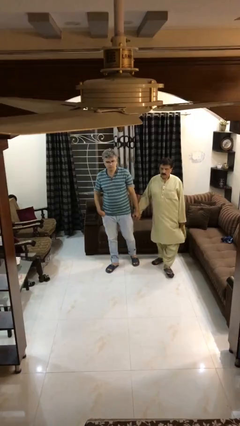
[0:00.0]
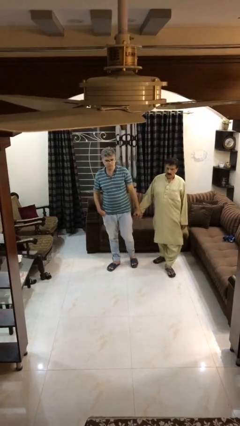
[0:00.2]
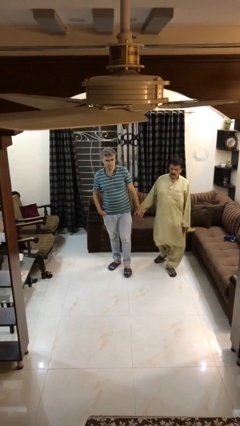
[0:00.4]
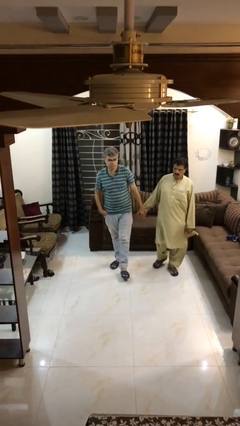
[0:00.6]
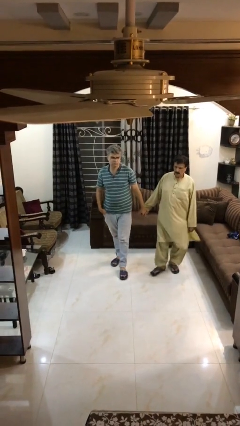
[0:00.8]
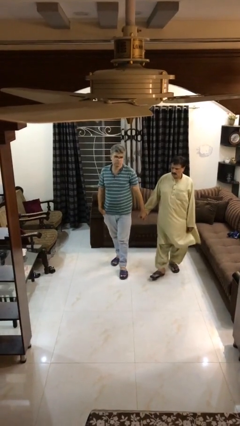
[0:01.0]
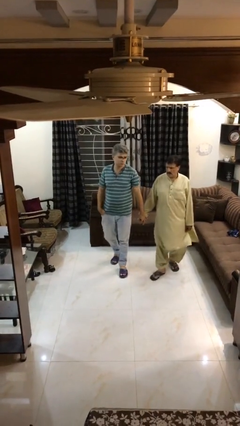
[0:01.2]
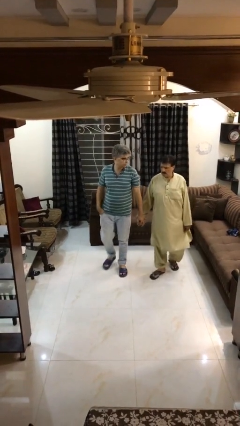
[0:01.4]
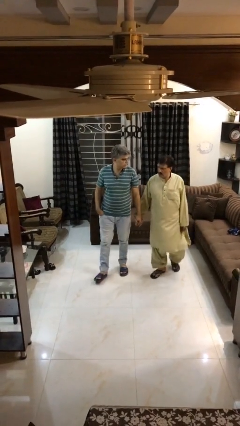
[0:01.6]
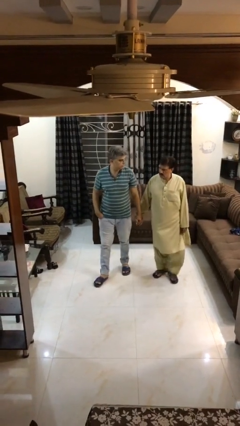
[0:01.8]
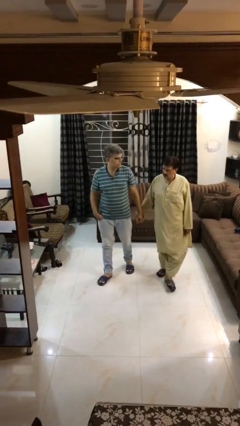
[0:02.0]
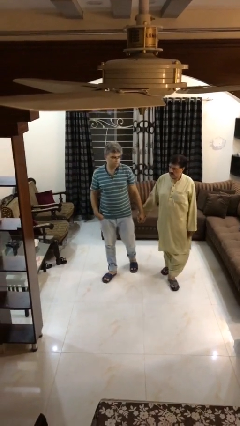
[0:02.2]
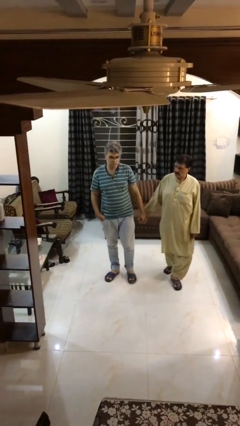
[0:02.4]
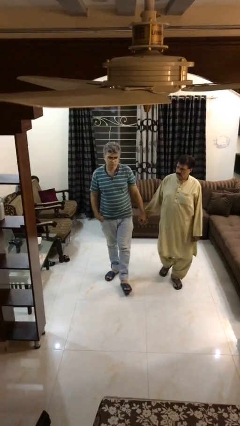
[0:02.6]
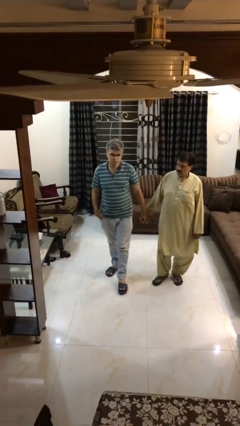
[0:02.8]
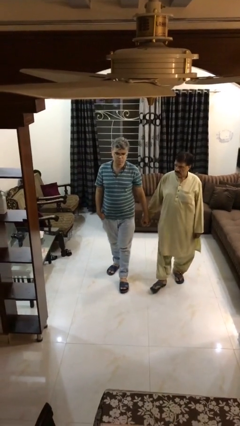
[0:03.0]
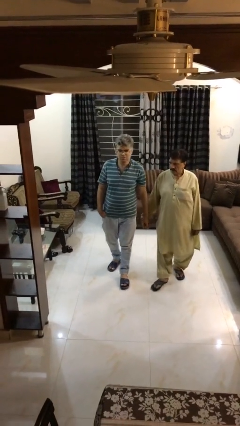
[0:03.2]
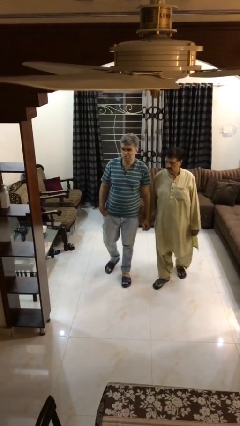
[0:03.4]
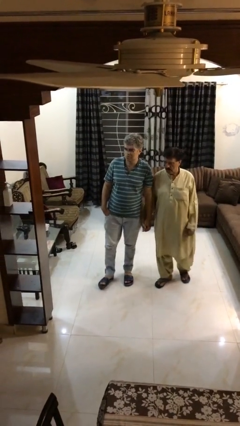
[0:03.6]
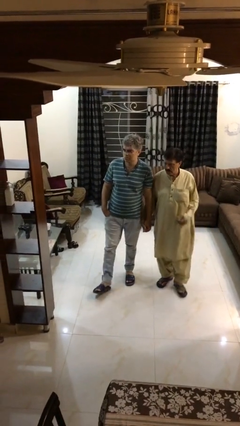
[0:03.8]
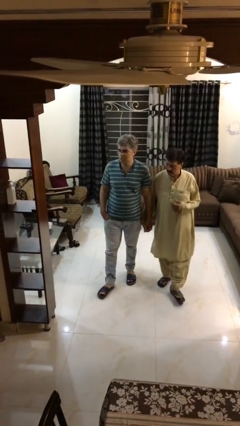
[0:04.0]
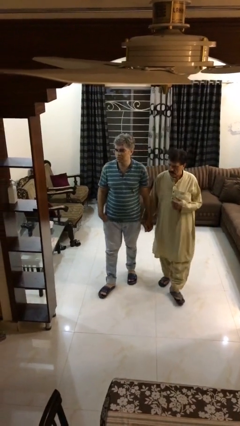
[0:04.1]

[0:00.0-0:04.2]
person holds hand

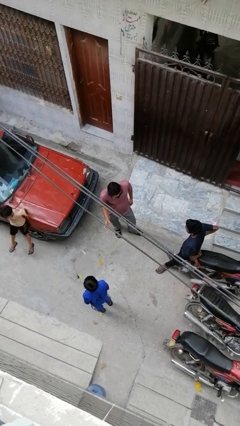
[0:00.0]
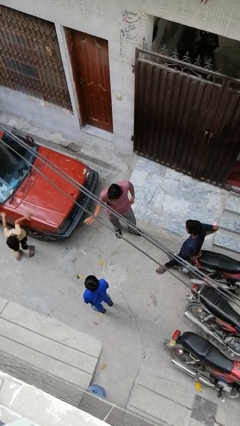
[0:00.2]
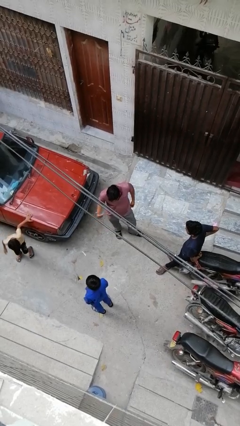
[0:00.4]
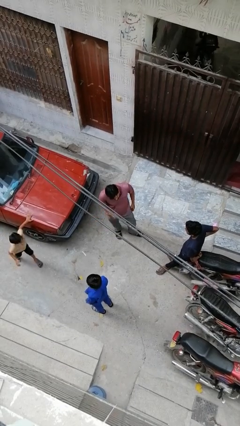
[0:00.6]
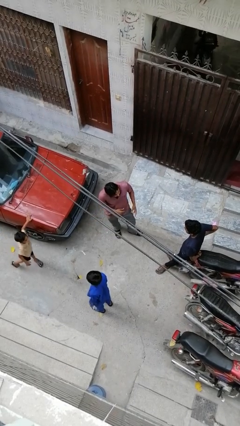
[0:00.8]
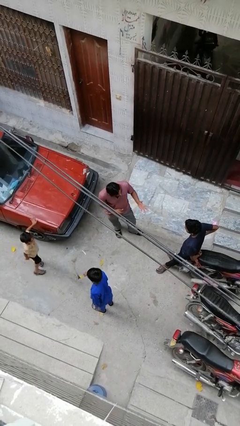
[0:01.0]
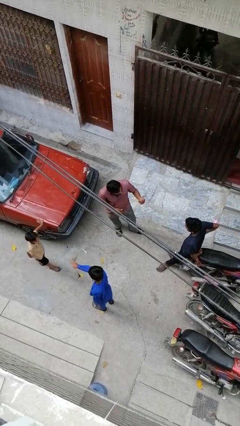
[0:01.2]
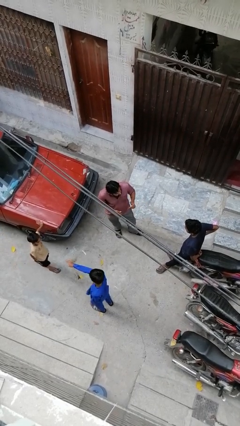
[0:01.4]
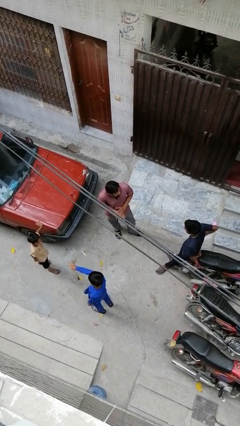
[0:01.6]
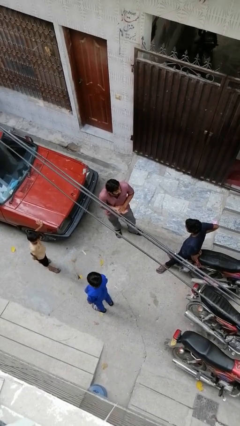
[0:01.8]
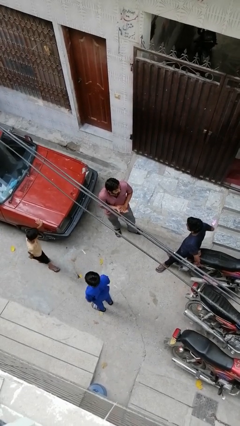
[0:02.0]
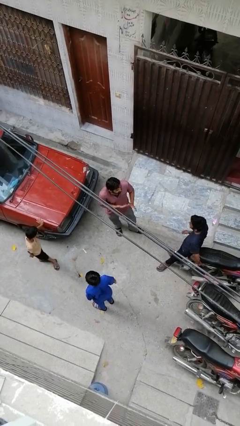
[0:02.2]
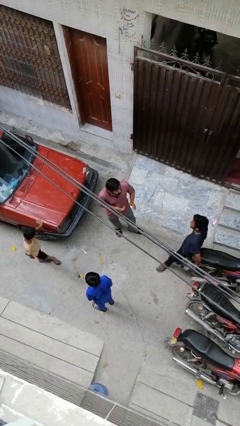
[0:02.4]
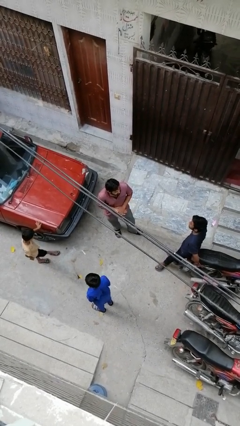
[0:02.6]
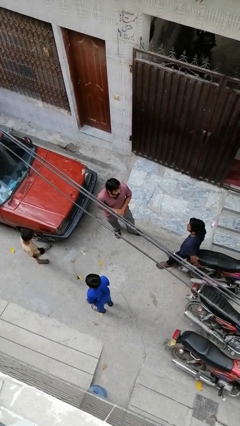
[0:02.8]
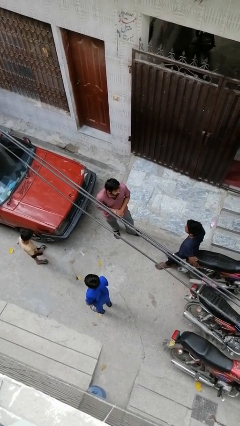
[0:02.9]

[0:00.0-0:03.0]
person talks to person

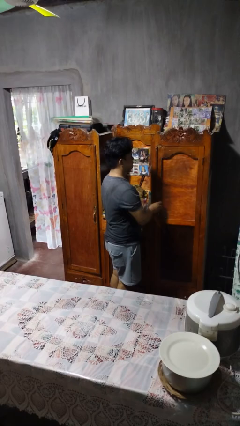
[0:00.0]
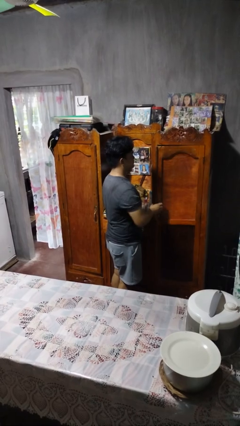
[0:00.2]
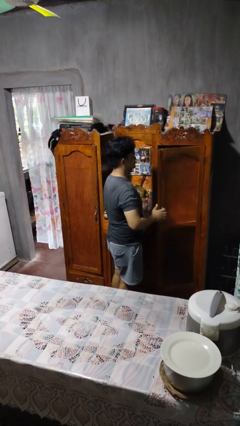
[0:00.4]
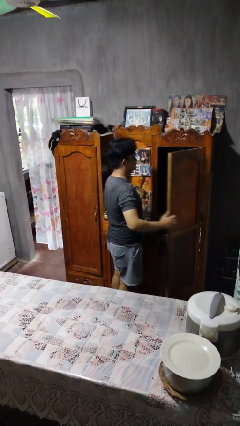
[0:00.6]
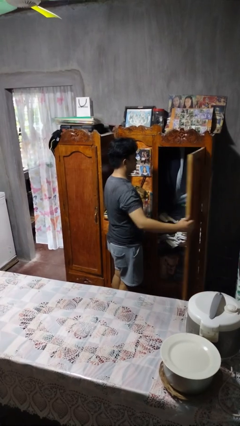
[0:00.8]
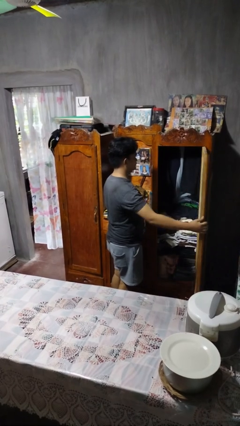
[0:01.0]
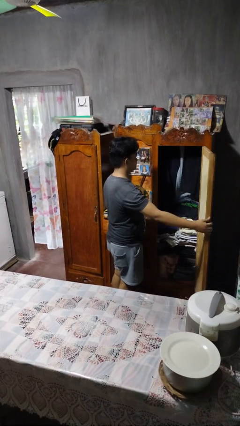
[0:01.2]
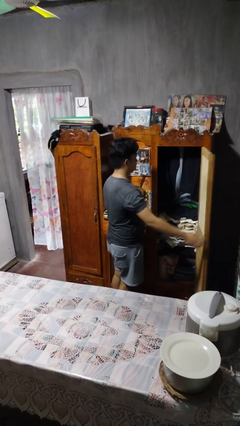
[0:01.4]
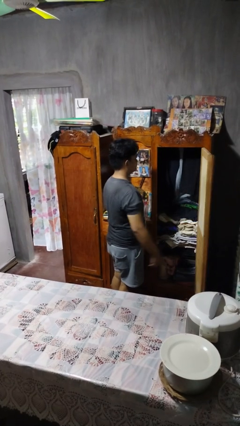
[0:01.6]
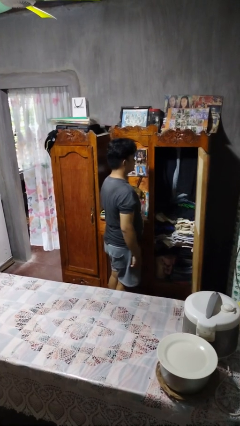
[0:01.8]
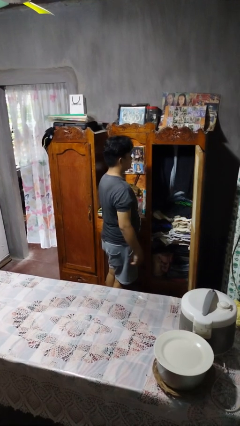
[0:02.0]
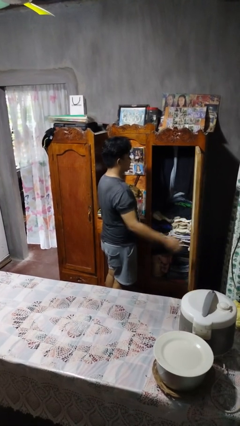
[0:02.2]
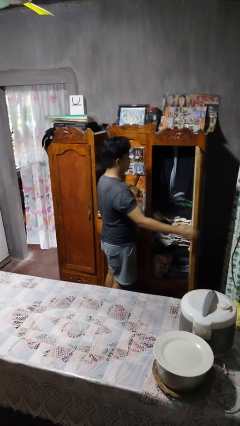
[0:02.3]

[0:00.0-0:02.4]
person opens closet door

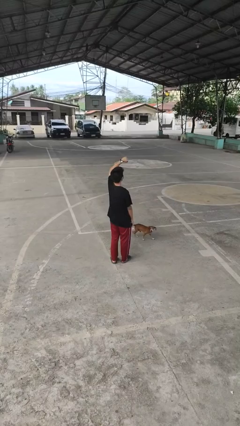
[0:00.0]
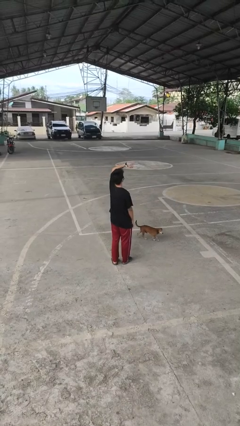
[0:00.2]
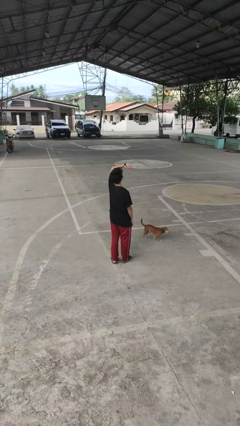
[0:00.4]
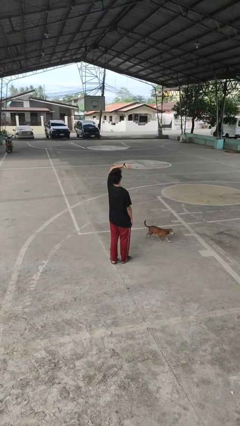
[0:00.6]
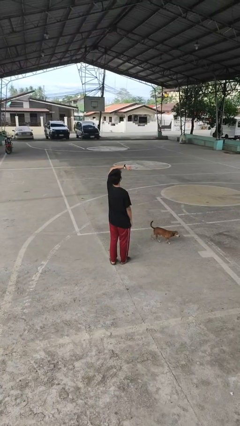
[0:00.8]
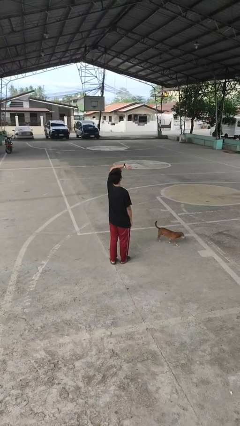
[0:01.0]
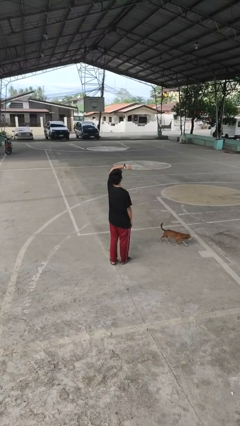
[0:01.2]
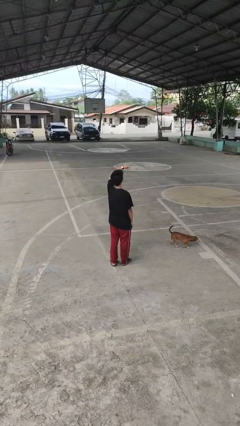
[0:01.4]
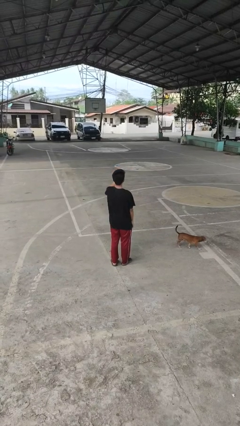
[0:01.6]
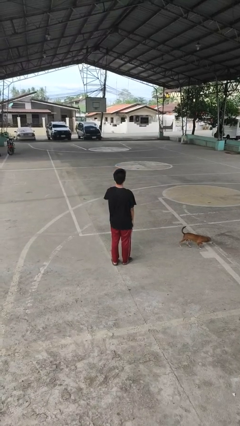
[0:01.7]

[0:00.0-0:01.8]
person looks at wristwatch

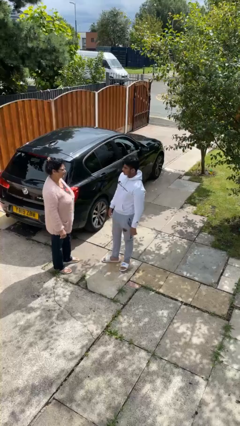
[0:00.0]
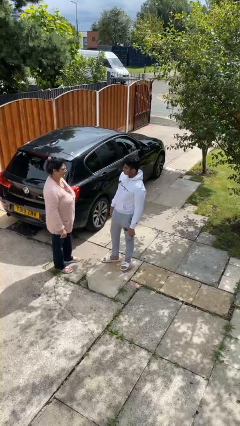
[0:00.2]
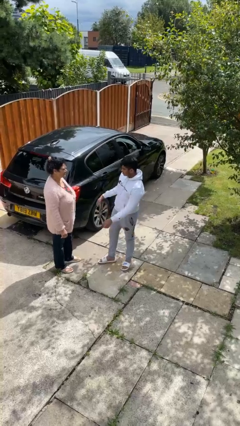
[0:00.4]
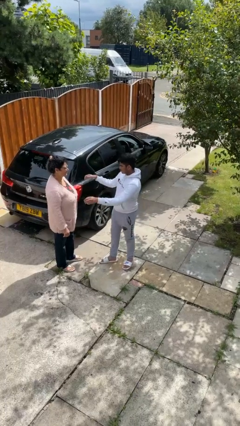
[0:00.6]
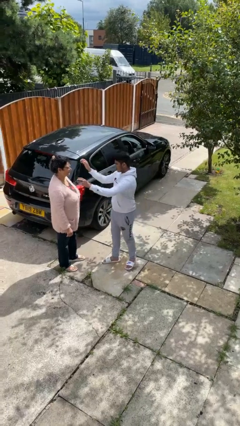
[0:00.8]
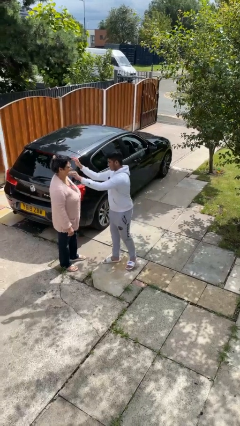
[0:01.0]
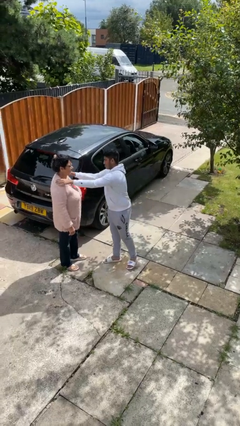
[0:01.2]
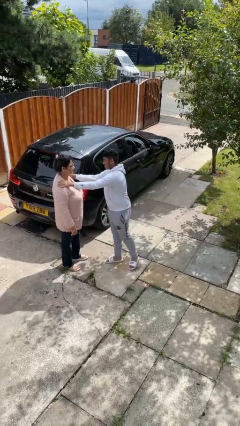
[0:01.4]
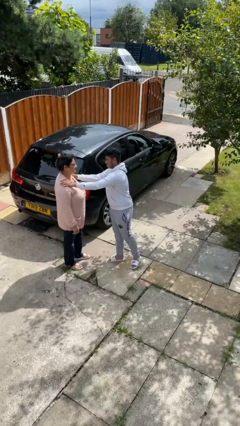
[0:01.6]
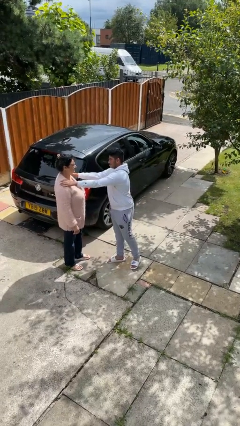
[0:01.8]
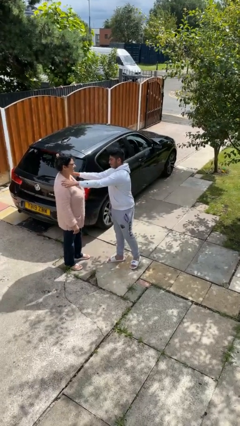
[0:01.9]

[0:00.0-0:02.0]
person pounds shoulders of person

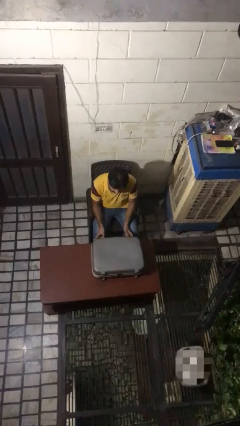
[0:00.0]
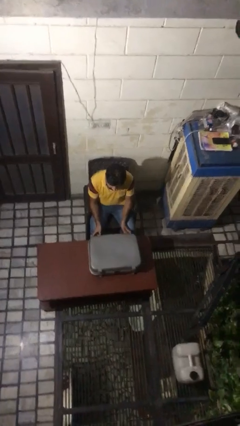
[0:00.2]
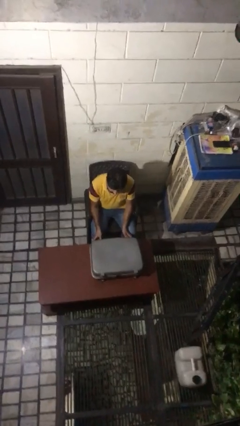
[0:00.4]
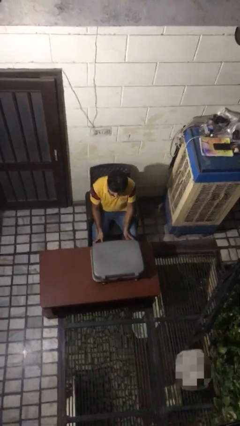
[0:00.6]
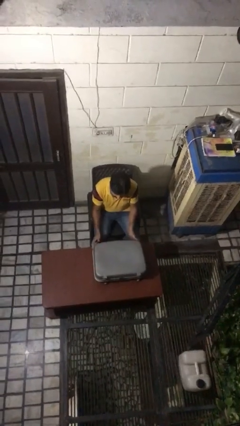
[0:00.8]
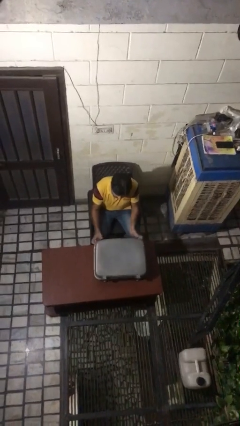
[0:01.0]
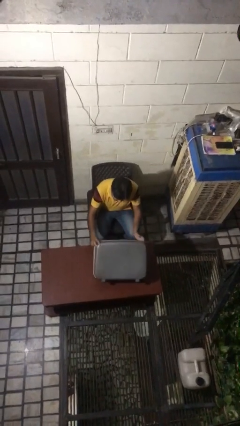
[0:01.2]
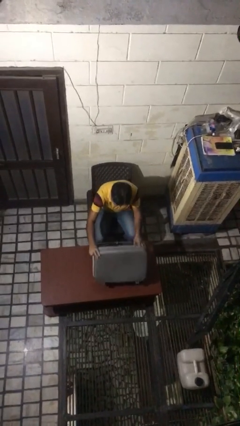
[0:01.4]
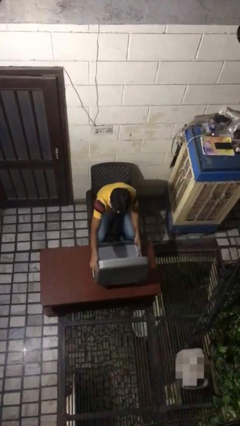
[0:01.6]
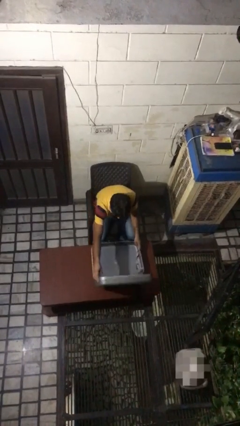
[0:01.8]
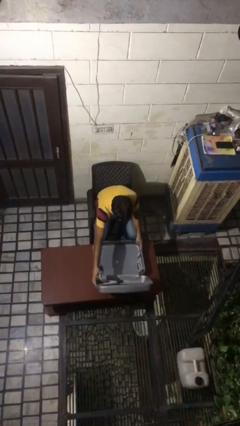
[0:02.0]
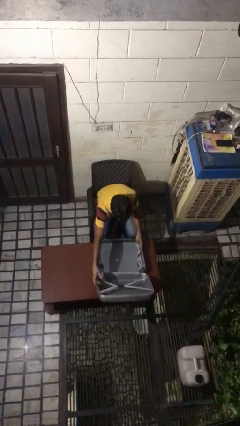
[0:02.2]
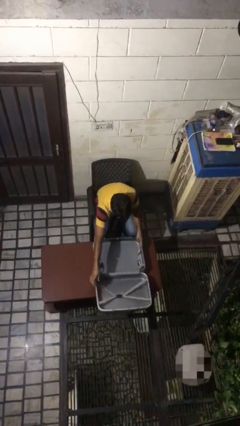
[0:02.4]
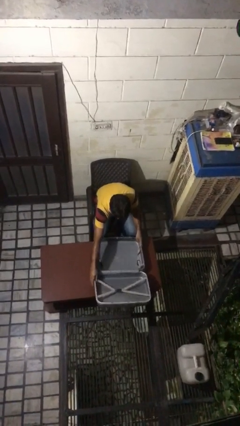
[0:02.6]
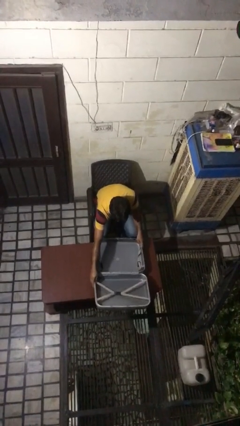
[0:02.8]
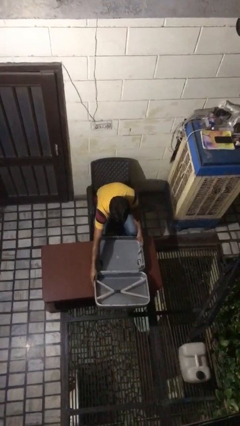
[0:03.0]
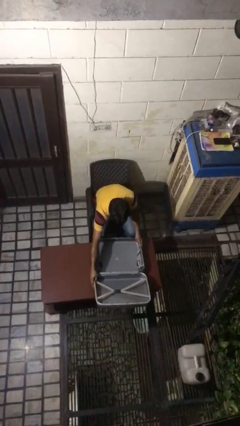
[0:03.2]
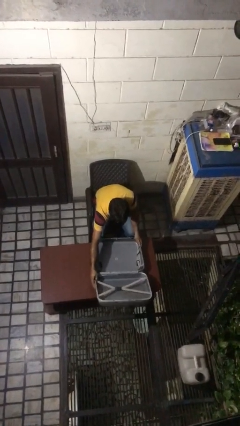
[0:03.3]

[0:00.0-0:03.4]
person opens suitcase

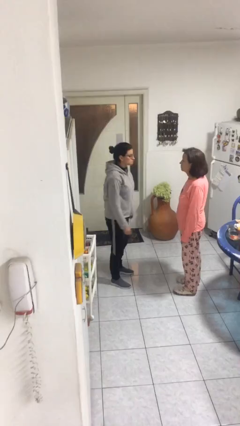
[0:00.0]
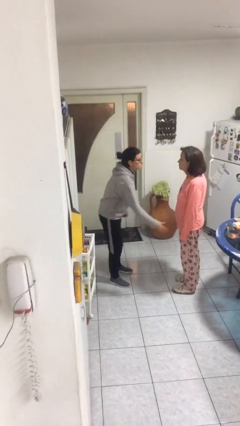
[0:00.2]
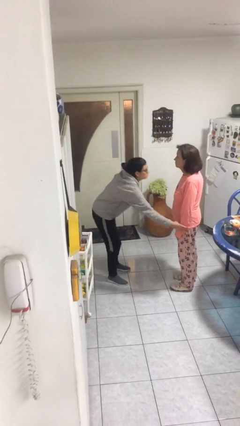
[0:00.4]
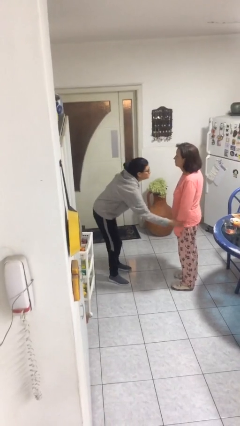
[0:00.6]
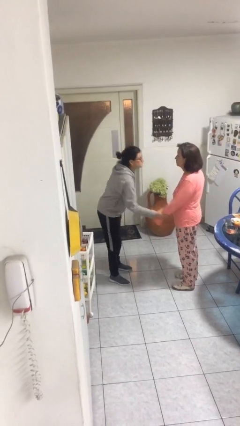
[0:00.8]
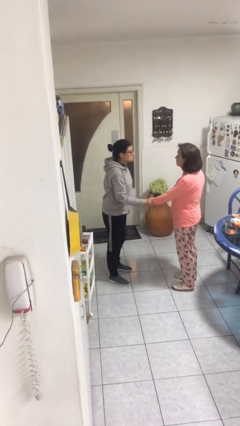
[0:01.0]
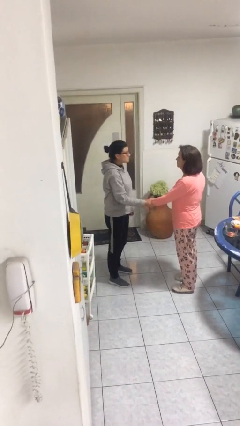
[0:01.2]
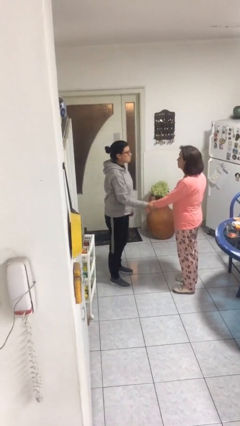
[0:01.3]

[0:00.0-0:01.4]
person grabs person by forearm
